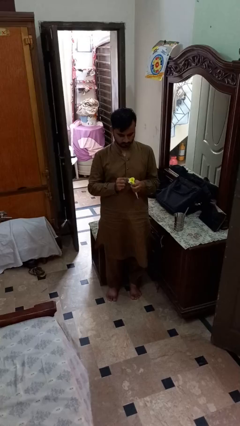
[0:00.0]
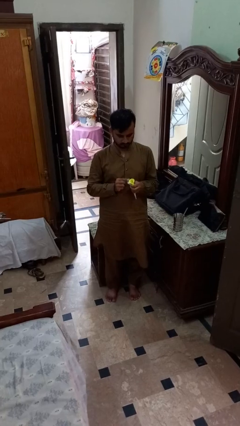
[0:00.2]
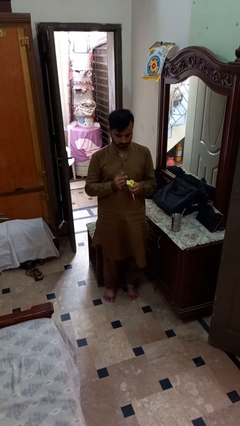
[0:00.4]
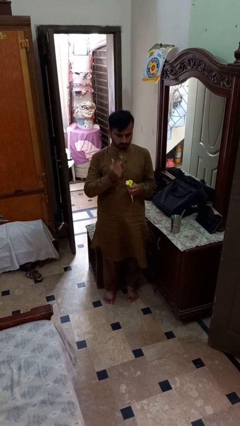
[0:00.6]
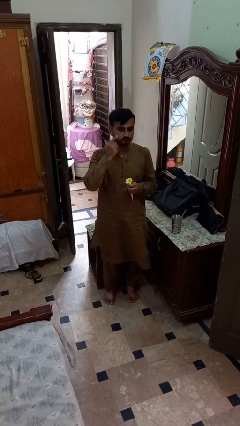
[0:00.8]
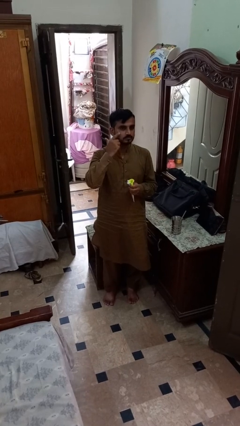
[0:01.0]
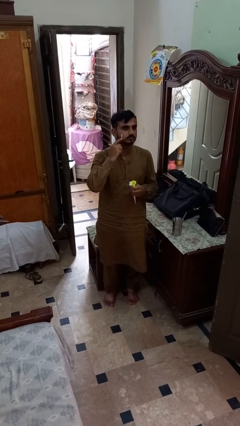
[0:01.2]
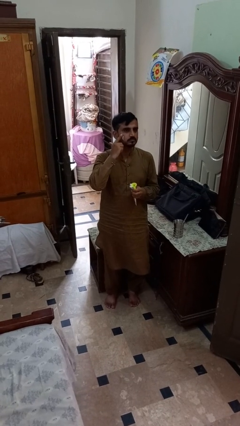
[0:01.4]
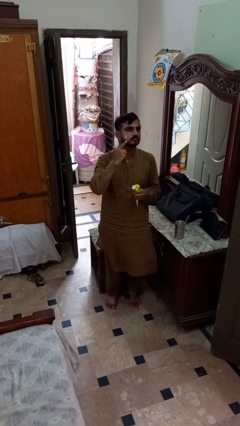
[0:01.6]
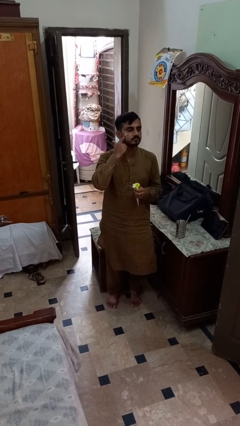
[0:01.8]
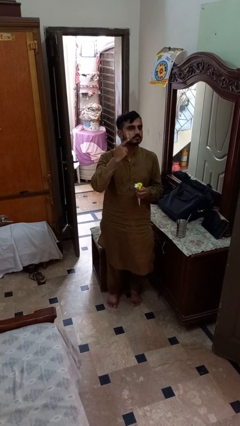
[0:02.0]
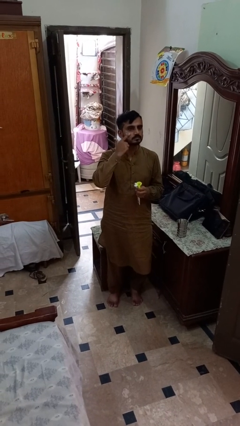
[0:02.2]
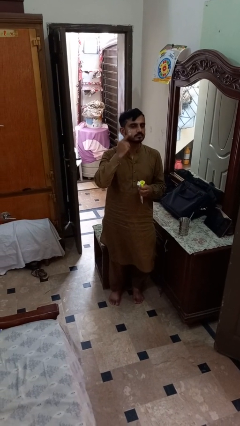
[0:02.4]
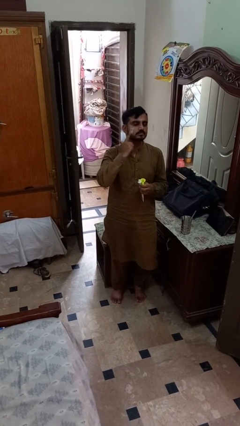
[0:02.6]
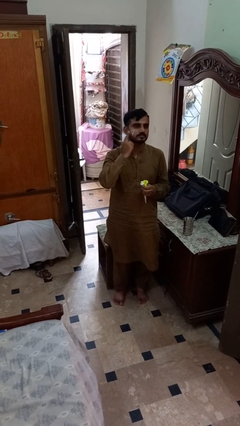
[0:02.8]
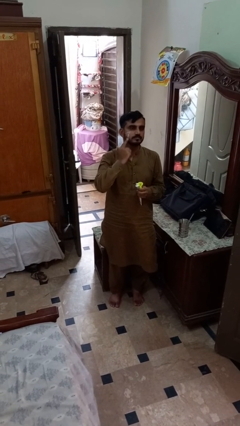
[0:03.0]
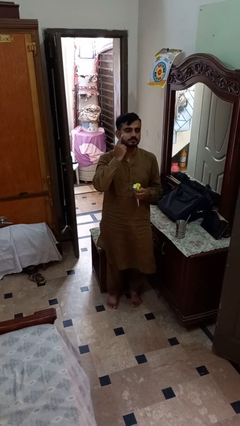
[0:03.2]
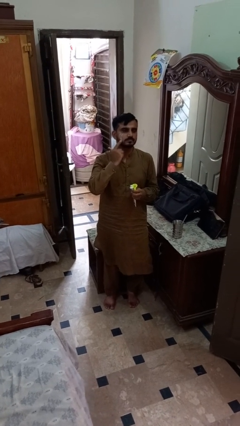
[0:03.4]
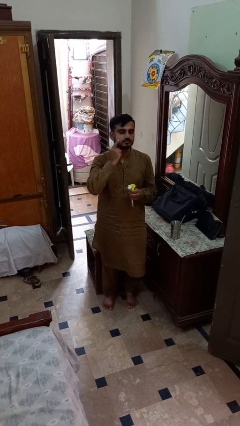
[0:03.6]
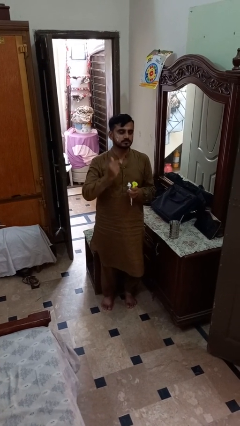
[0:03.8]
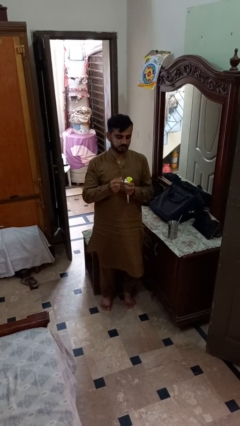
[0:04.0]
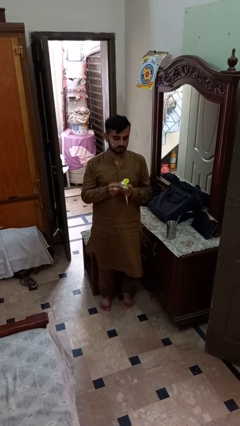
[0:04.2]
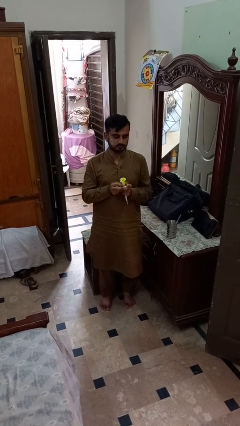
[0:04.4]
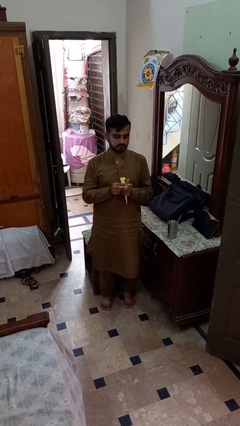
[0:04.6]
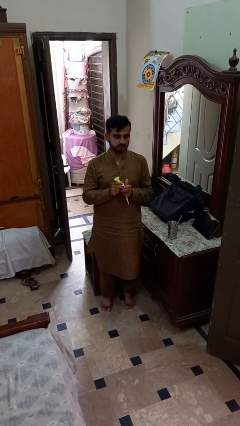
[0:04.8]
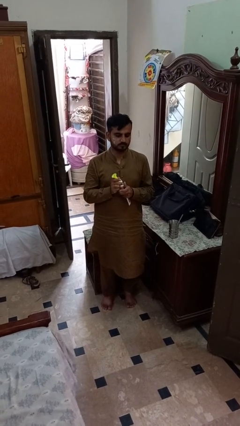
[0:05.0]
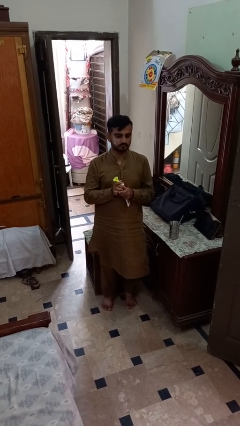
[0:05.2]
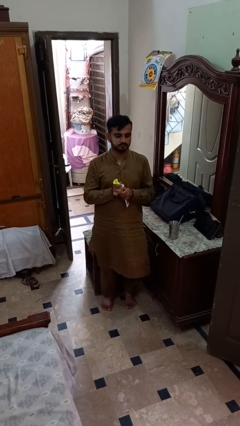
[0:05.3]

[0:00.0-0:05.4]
person applies shaving cream

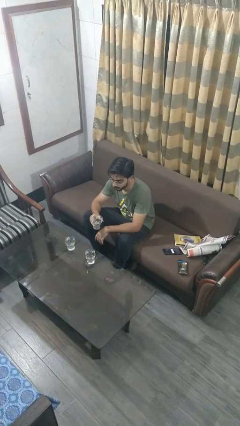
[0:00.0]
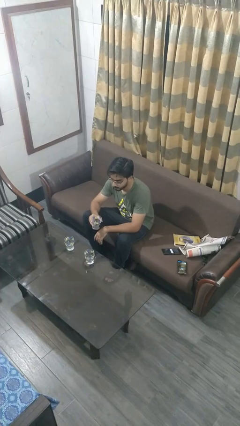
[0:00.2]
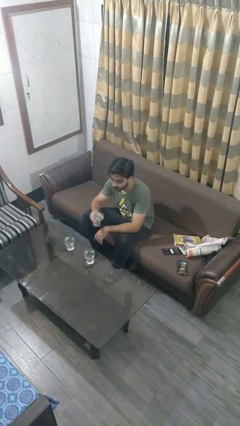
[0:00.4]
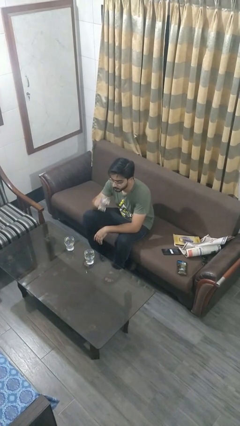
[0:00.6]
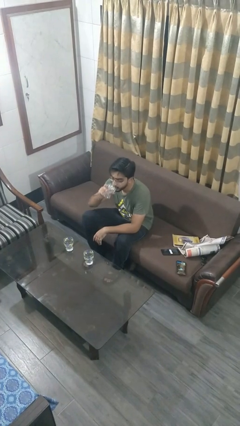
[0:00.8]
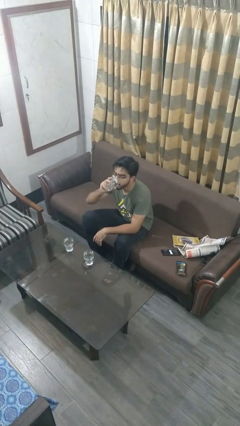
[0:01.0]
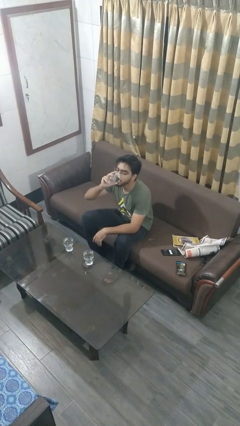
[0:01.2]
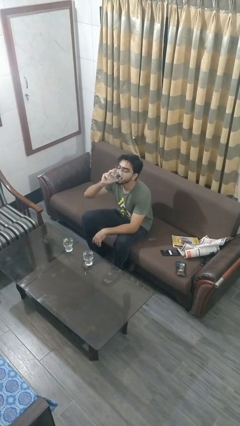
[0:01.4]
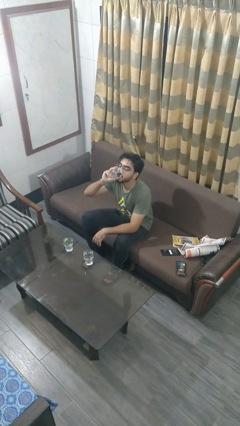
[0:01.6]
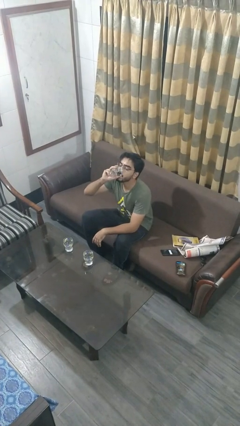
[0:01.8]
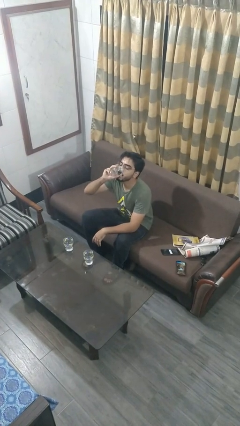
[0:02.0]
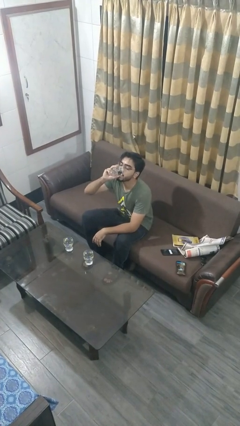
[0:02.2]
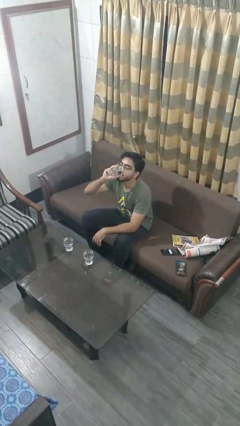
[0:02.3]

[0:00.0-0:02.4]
person drinks from shotglass

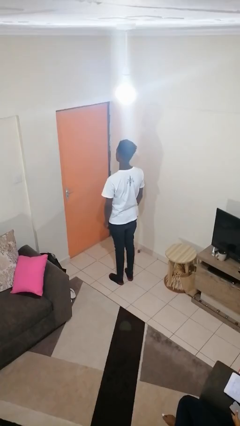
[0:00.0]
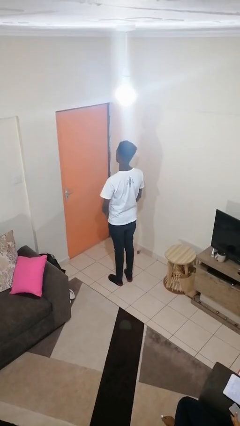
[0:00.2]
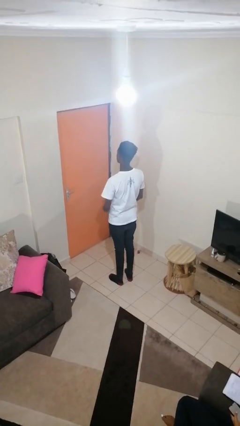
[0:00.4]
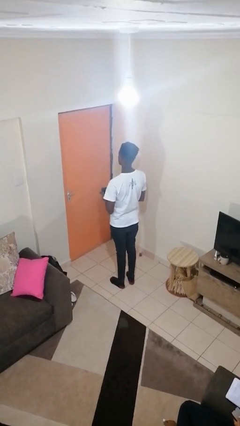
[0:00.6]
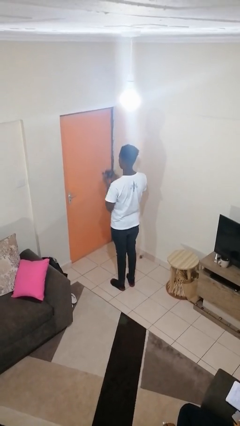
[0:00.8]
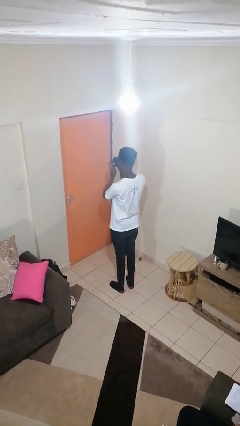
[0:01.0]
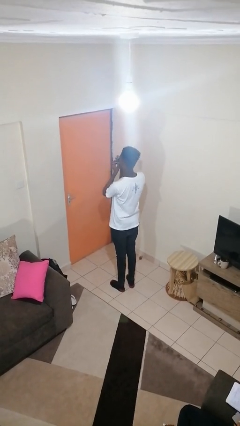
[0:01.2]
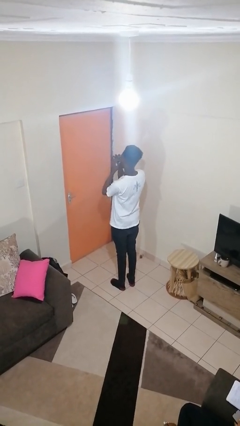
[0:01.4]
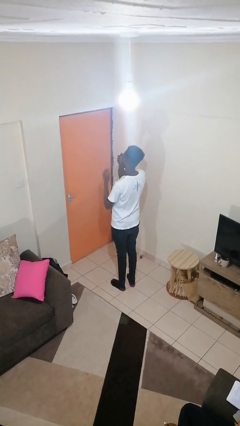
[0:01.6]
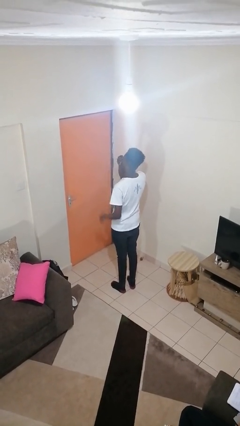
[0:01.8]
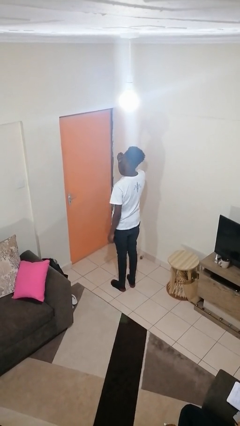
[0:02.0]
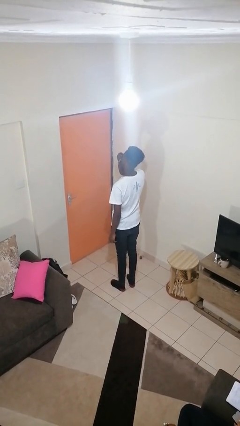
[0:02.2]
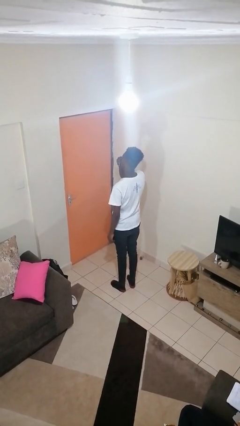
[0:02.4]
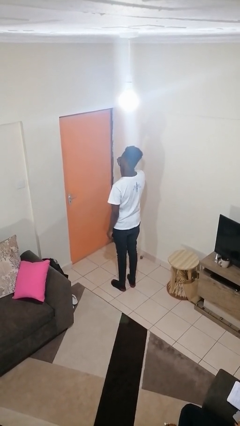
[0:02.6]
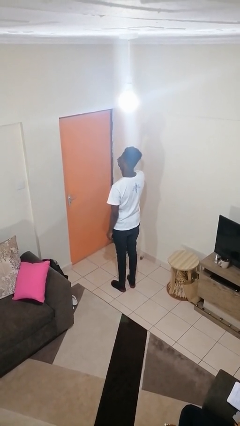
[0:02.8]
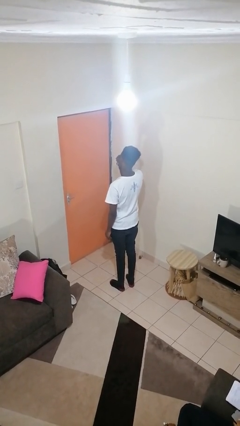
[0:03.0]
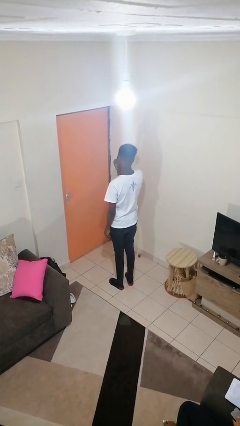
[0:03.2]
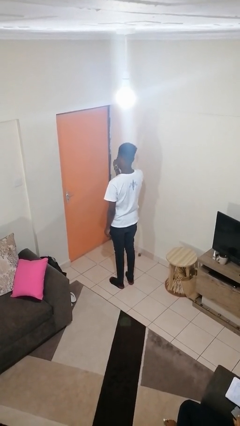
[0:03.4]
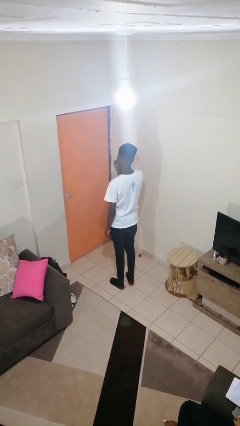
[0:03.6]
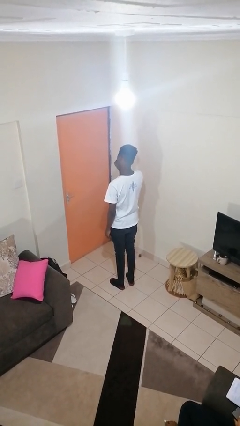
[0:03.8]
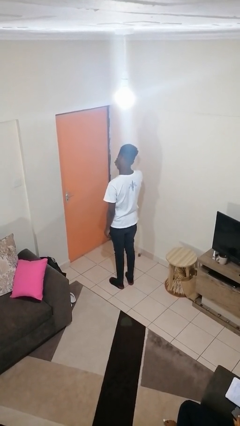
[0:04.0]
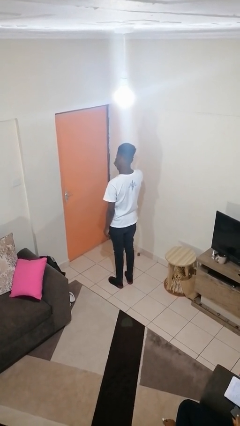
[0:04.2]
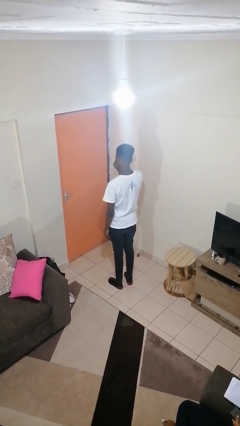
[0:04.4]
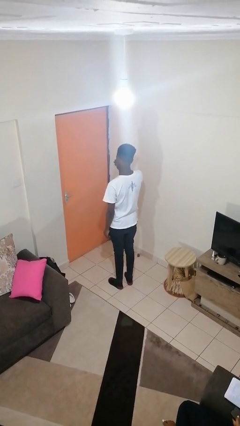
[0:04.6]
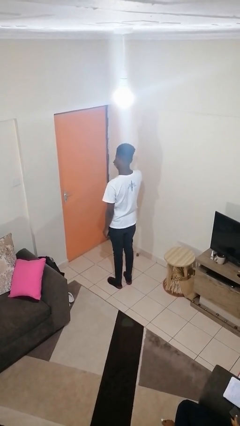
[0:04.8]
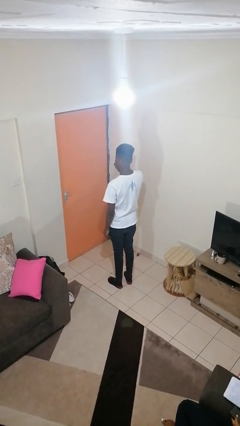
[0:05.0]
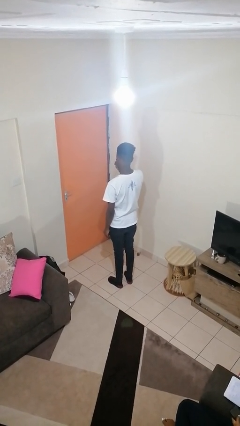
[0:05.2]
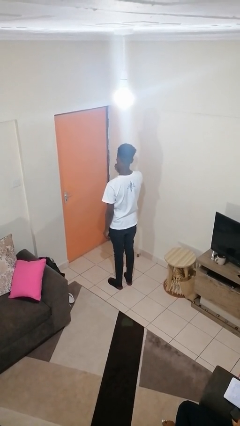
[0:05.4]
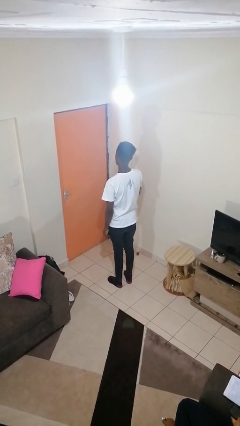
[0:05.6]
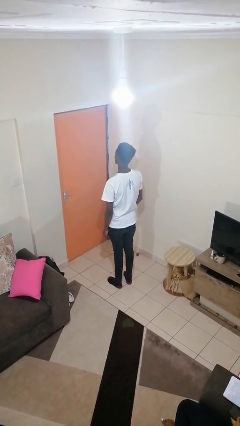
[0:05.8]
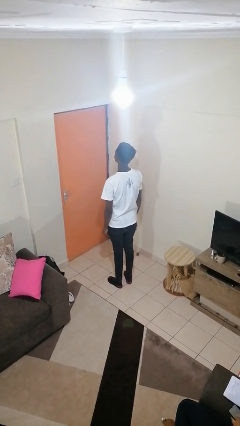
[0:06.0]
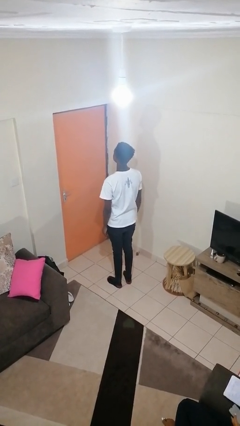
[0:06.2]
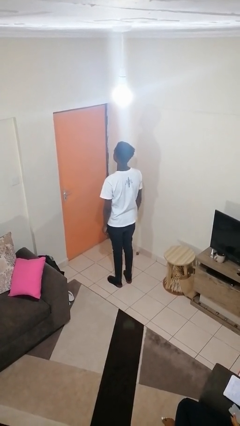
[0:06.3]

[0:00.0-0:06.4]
person blows nose

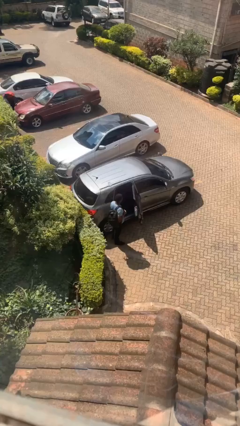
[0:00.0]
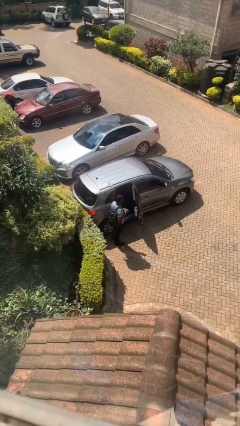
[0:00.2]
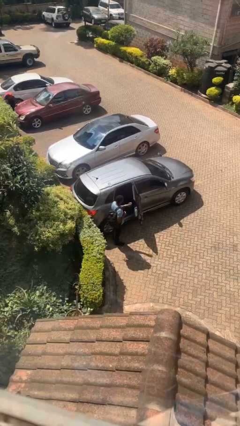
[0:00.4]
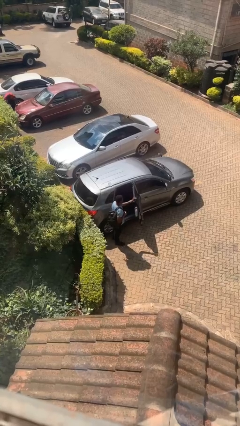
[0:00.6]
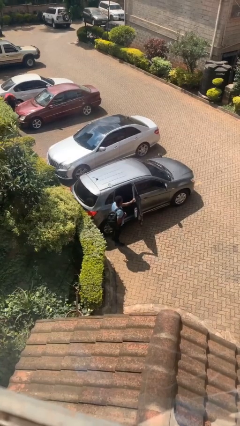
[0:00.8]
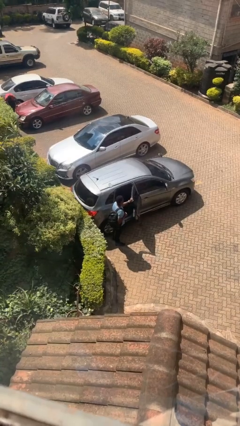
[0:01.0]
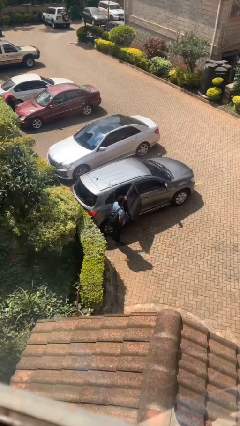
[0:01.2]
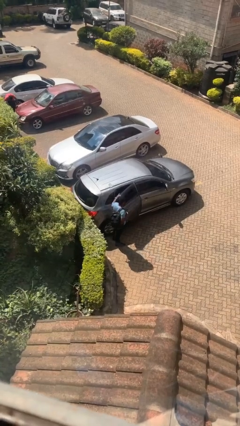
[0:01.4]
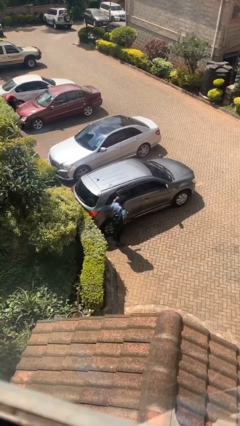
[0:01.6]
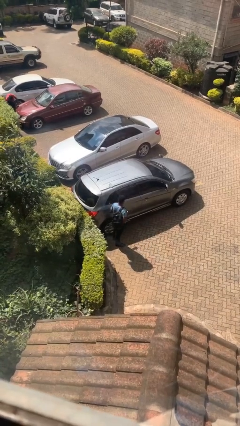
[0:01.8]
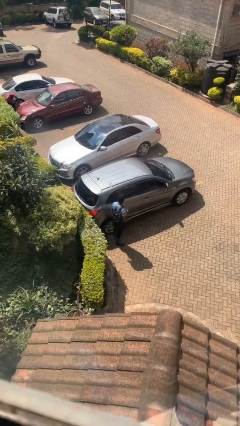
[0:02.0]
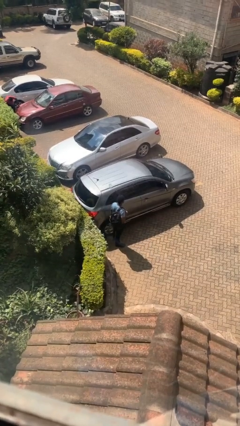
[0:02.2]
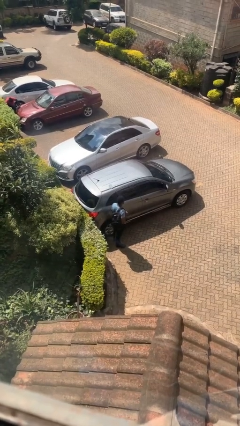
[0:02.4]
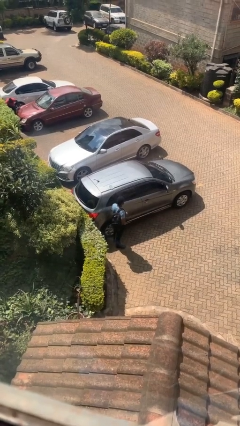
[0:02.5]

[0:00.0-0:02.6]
person closes car door

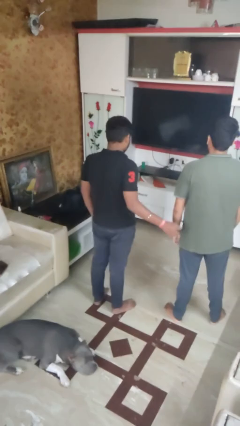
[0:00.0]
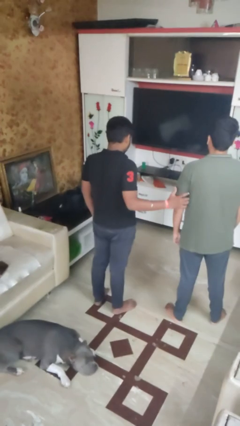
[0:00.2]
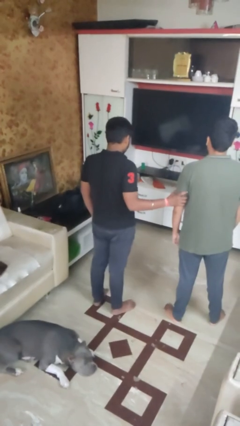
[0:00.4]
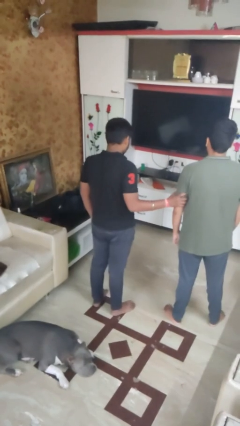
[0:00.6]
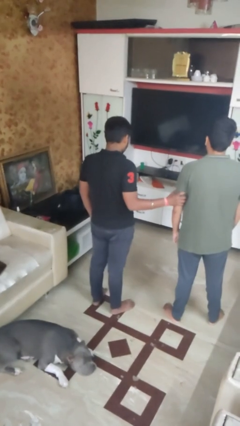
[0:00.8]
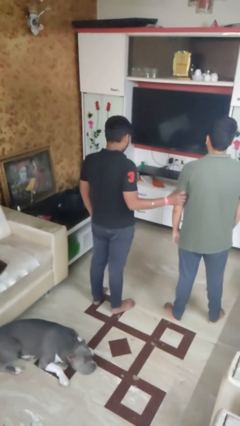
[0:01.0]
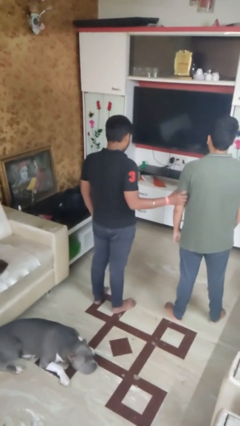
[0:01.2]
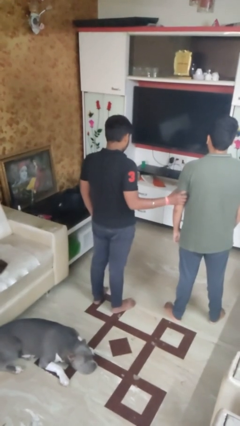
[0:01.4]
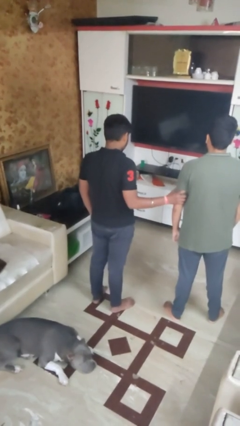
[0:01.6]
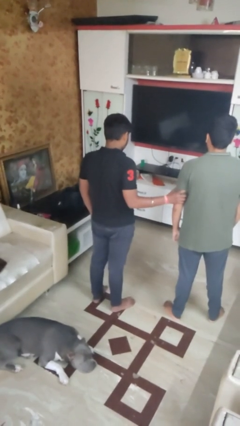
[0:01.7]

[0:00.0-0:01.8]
person grabs person by bicep
